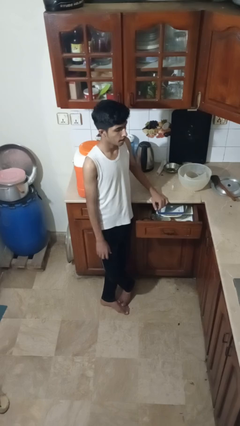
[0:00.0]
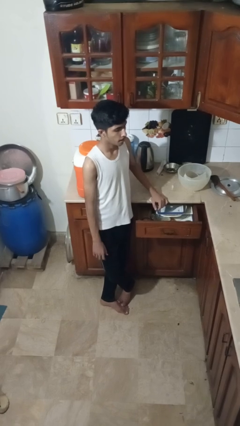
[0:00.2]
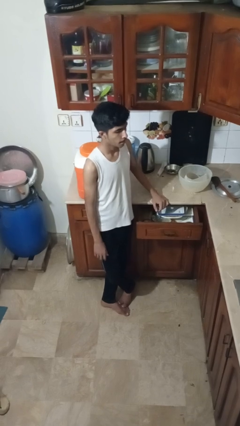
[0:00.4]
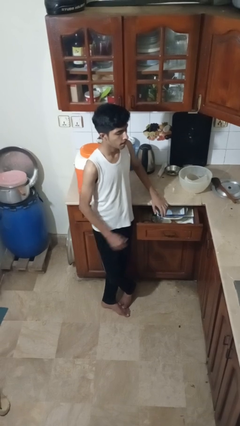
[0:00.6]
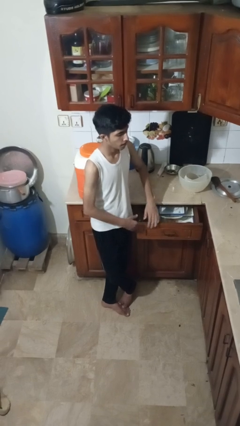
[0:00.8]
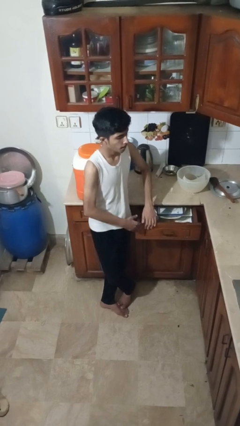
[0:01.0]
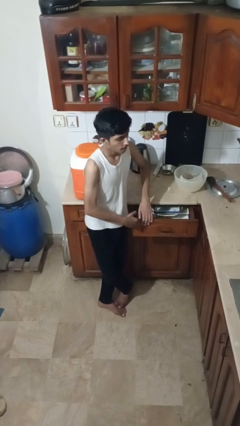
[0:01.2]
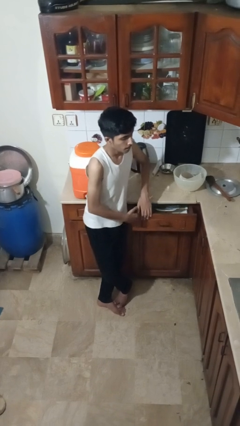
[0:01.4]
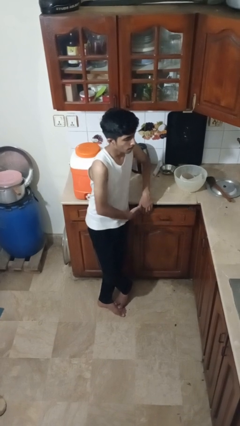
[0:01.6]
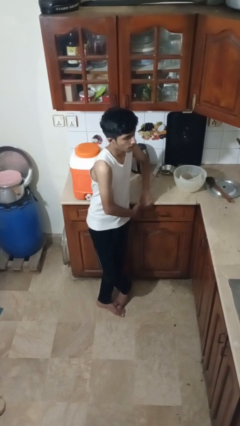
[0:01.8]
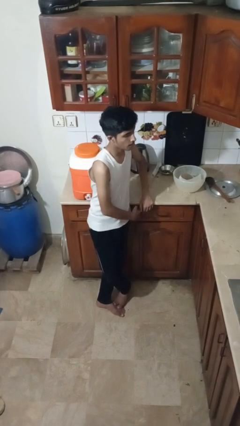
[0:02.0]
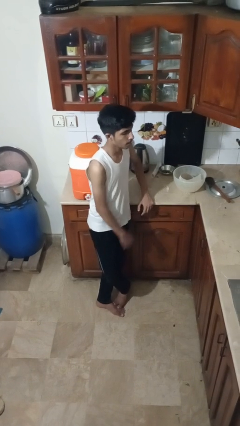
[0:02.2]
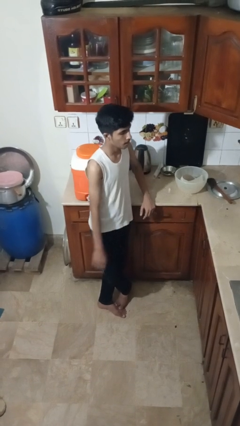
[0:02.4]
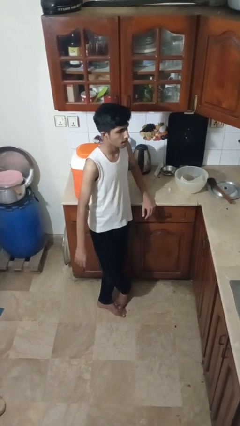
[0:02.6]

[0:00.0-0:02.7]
person closes kitchen drawer

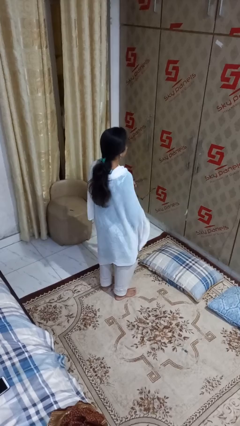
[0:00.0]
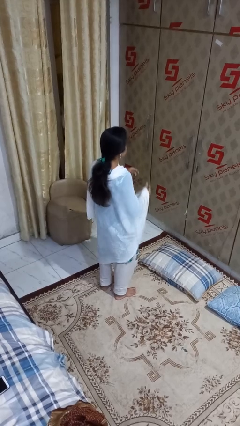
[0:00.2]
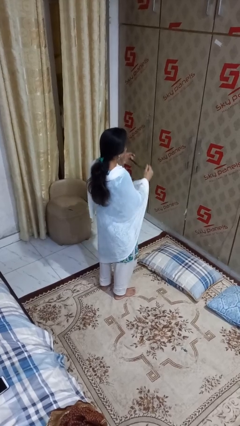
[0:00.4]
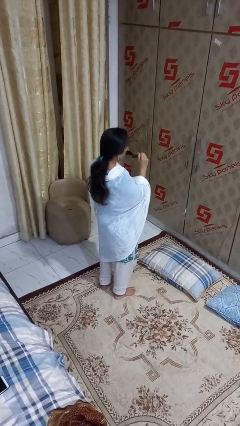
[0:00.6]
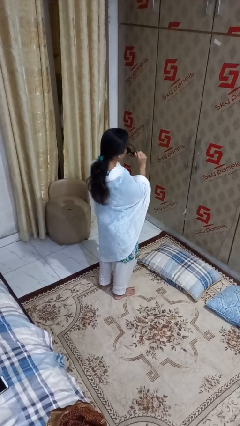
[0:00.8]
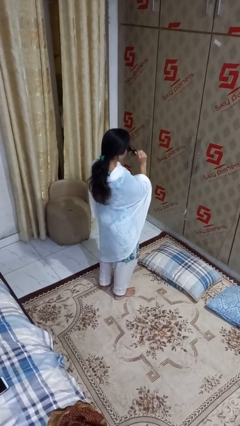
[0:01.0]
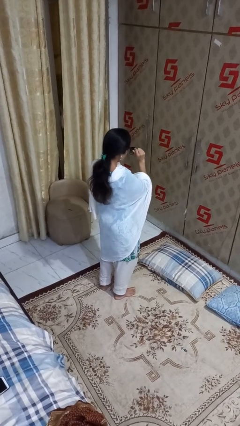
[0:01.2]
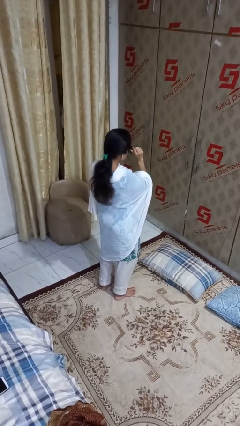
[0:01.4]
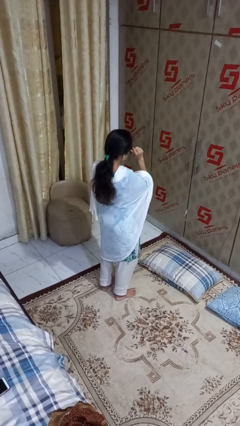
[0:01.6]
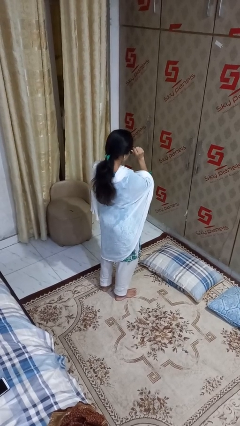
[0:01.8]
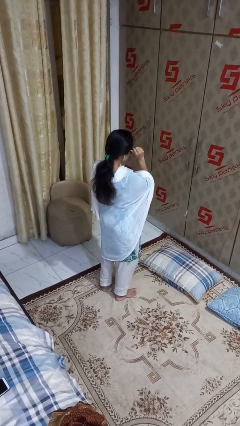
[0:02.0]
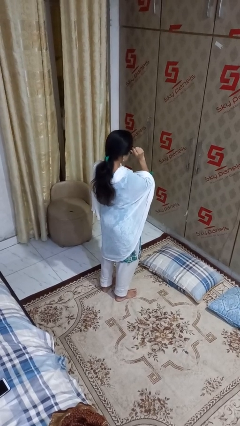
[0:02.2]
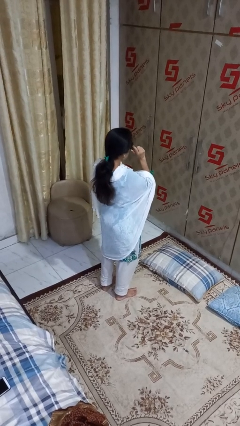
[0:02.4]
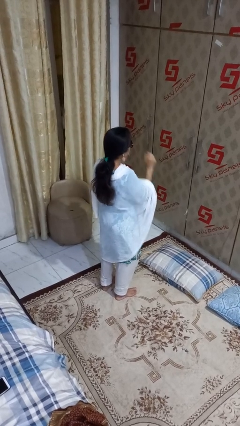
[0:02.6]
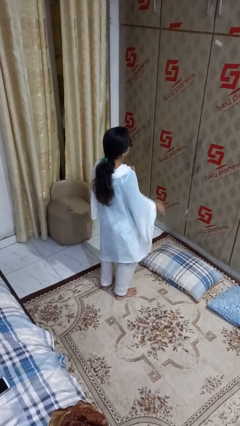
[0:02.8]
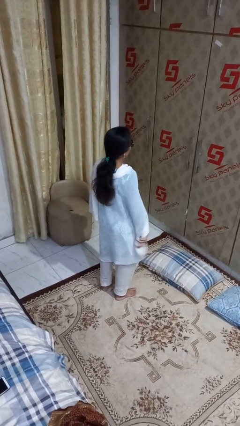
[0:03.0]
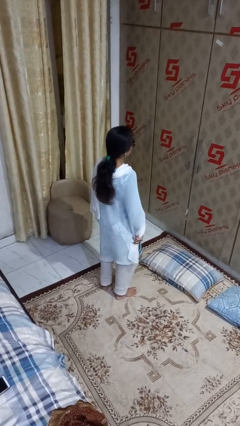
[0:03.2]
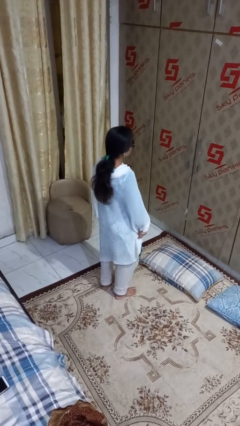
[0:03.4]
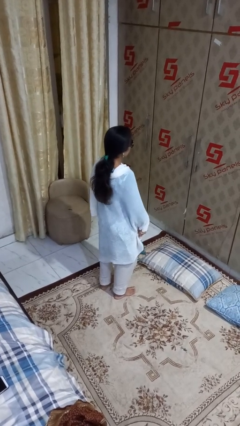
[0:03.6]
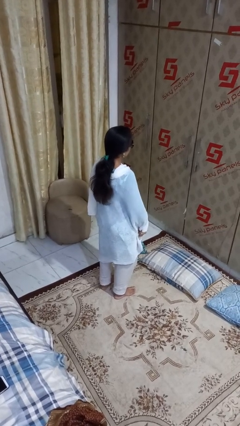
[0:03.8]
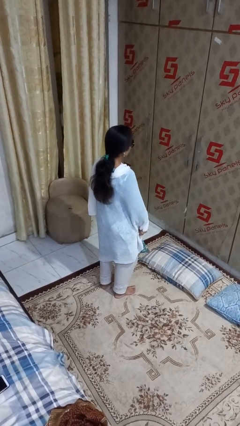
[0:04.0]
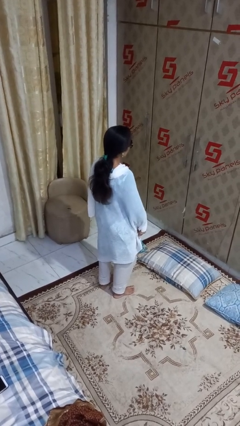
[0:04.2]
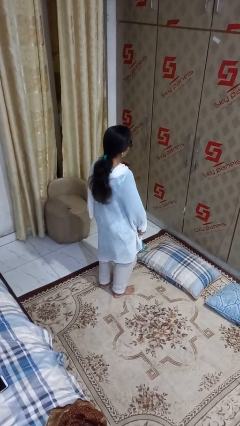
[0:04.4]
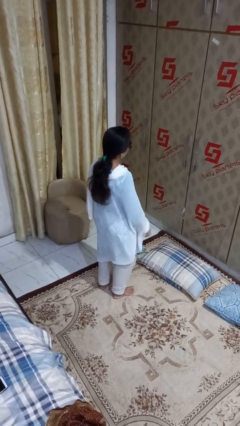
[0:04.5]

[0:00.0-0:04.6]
person puts on sunglasses

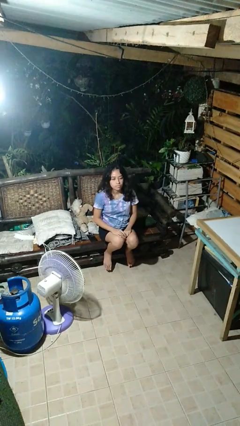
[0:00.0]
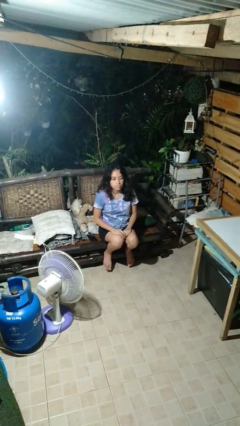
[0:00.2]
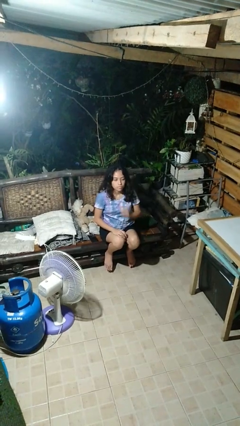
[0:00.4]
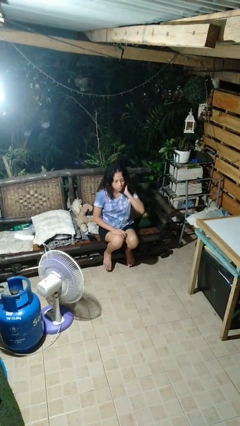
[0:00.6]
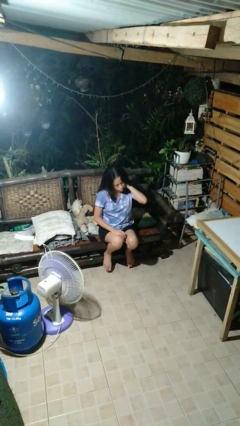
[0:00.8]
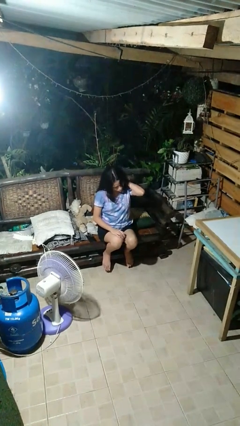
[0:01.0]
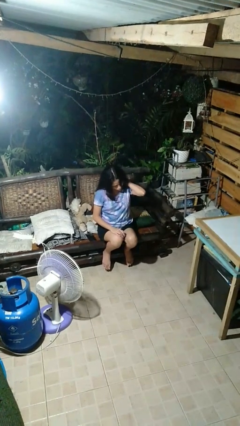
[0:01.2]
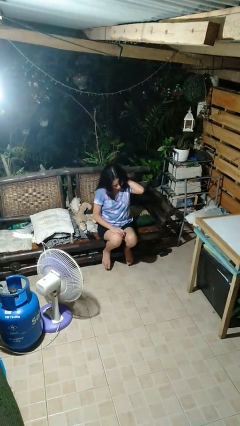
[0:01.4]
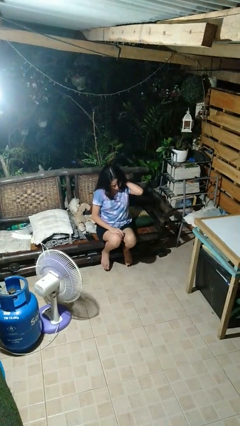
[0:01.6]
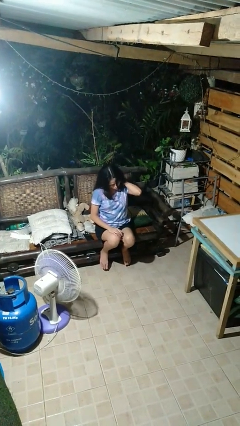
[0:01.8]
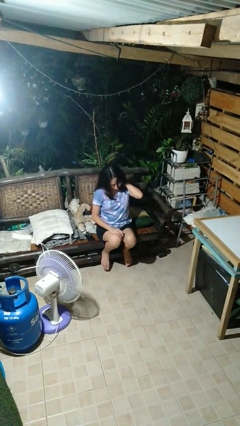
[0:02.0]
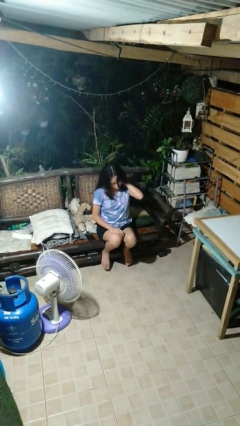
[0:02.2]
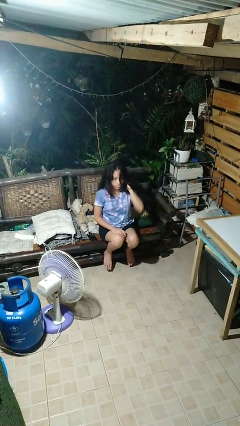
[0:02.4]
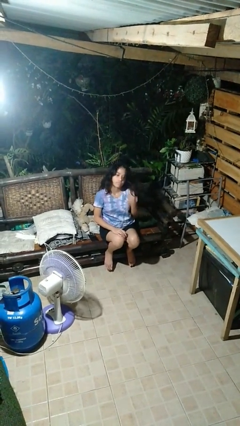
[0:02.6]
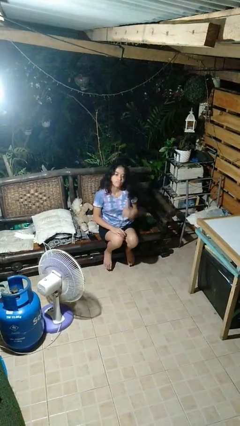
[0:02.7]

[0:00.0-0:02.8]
person rubs neck

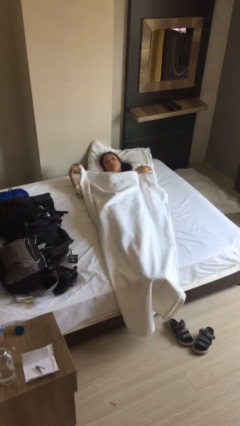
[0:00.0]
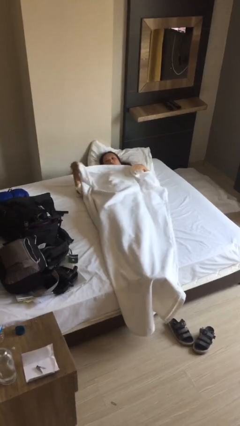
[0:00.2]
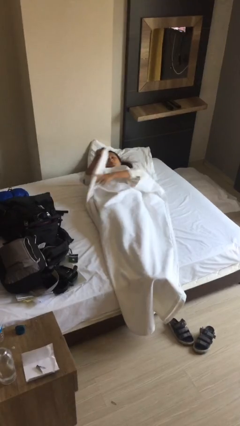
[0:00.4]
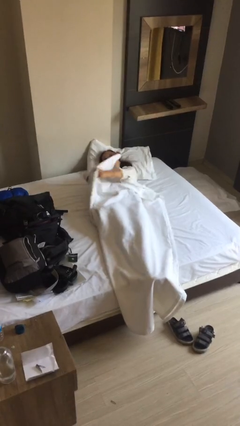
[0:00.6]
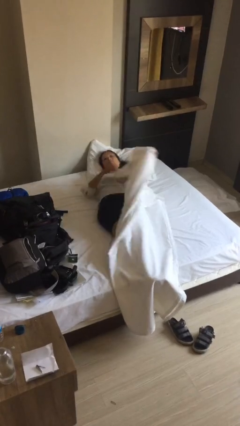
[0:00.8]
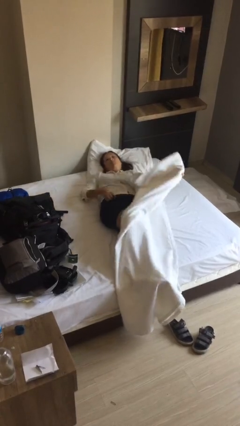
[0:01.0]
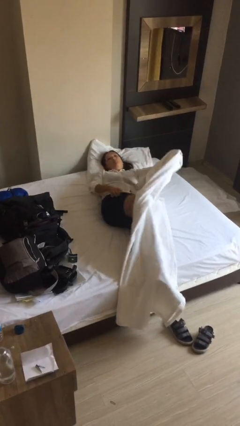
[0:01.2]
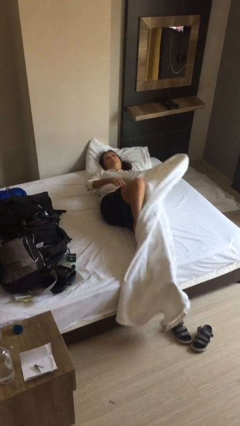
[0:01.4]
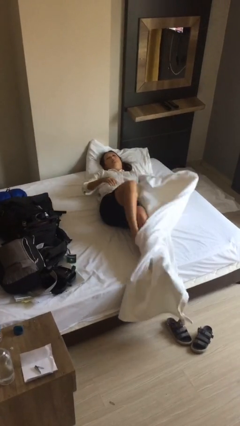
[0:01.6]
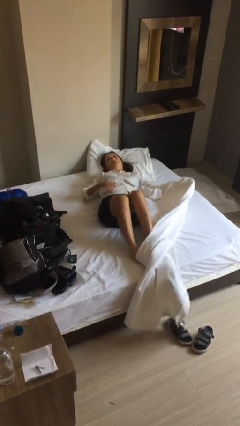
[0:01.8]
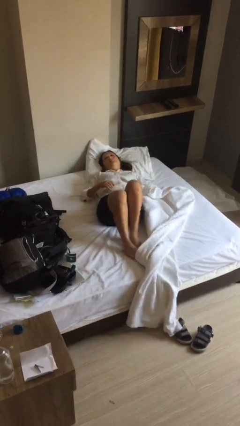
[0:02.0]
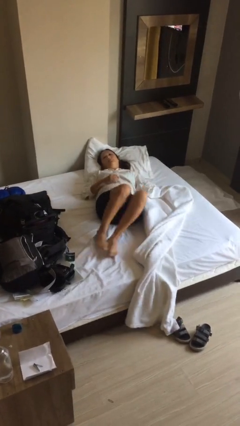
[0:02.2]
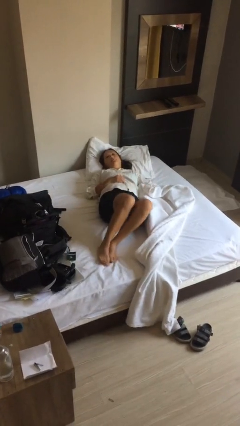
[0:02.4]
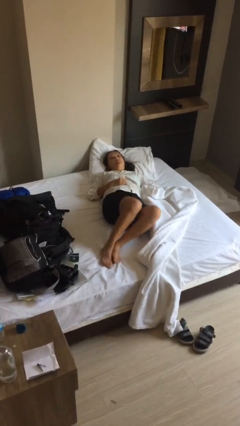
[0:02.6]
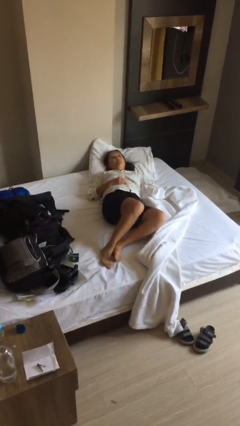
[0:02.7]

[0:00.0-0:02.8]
person uncovers with bedsheets

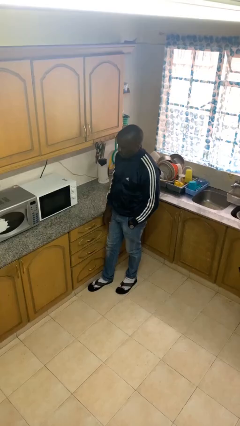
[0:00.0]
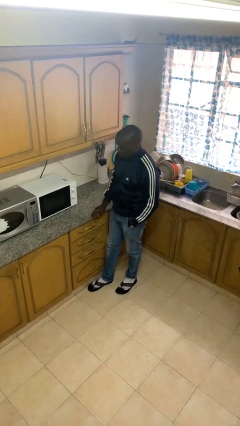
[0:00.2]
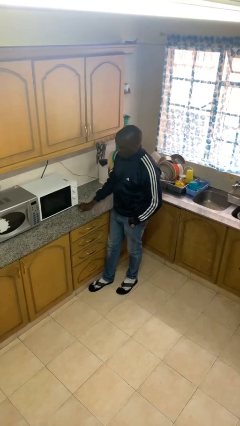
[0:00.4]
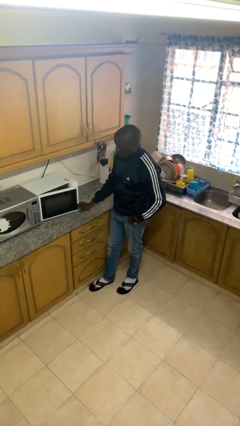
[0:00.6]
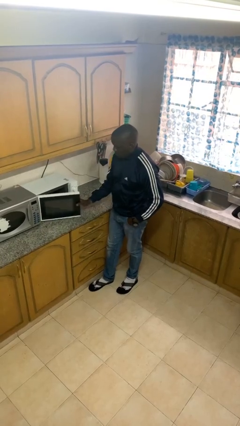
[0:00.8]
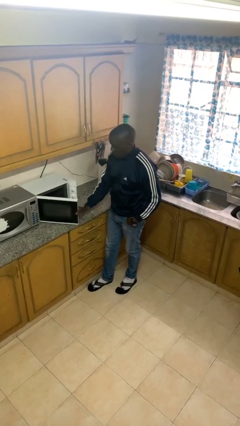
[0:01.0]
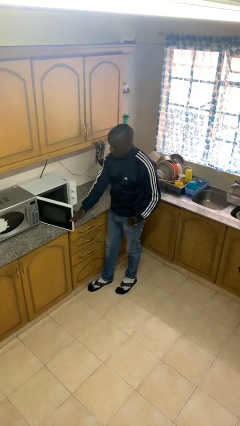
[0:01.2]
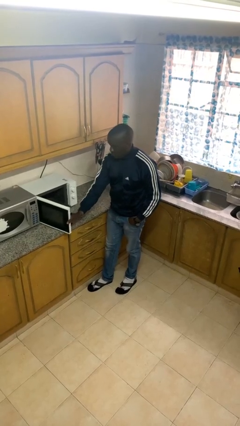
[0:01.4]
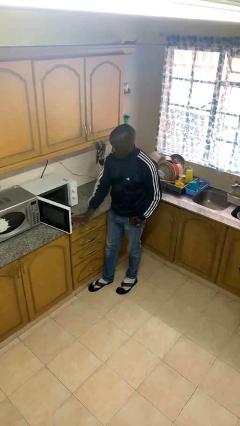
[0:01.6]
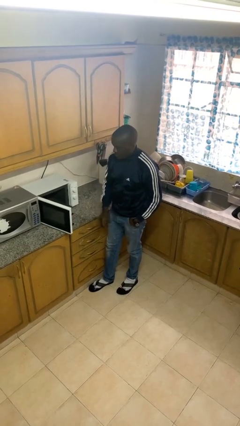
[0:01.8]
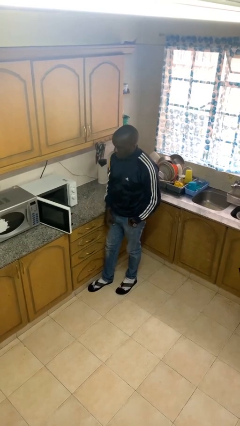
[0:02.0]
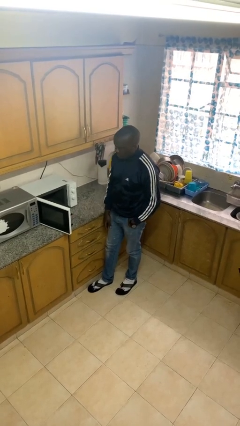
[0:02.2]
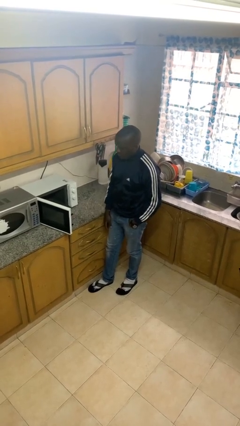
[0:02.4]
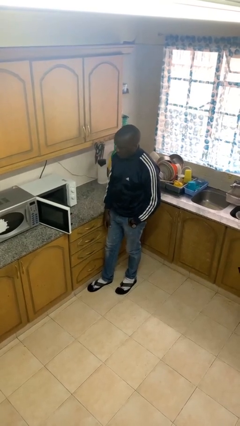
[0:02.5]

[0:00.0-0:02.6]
person opens microwave

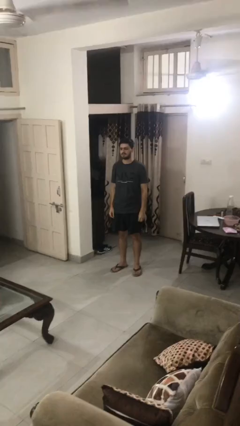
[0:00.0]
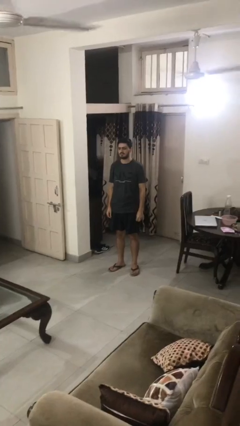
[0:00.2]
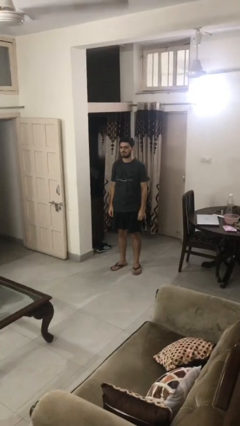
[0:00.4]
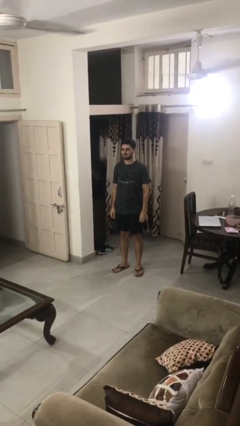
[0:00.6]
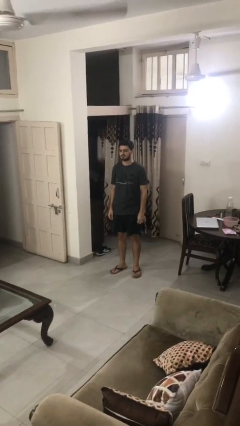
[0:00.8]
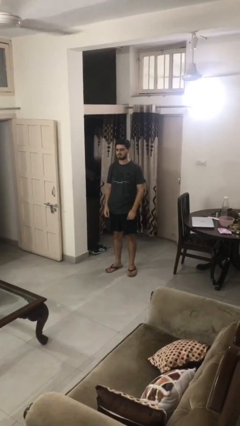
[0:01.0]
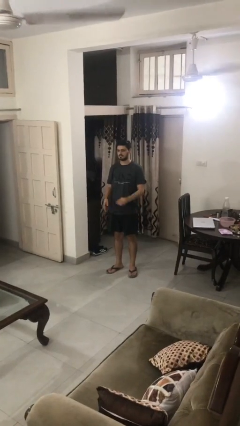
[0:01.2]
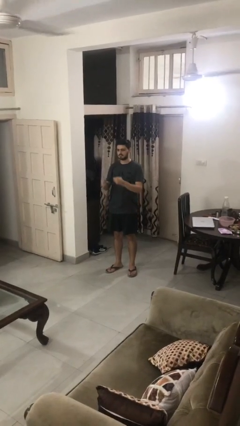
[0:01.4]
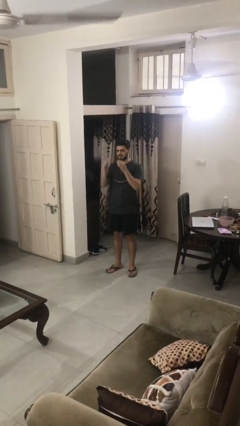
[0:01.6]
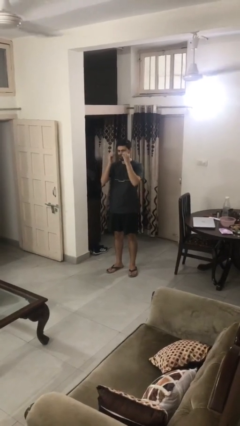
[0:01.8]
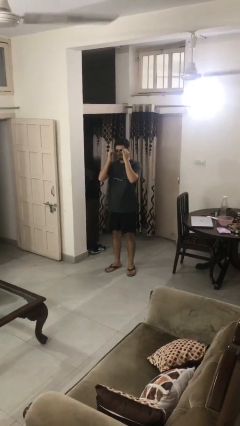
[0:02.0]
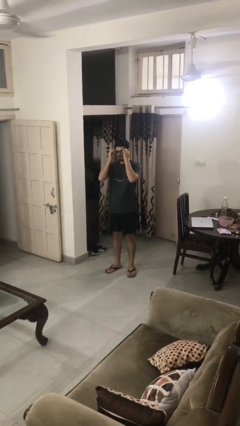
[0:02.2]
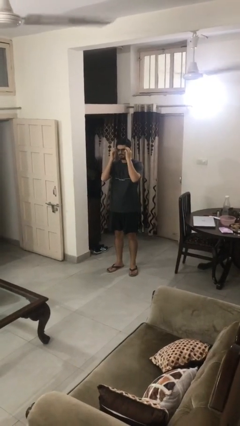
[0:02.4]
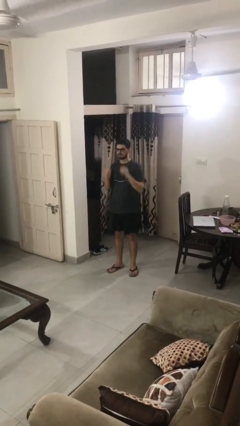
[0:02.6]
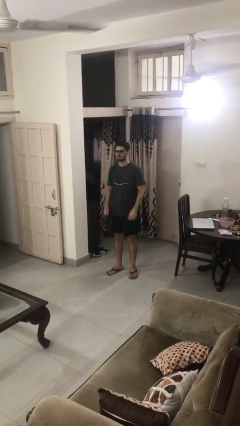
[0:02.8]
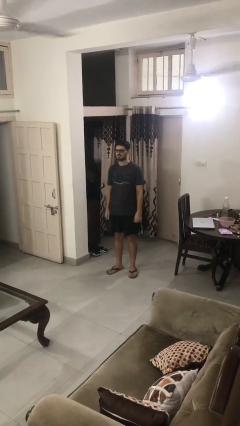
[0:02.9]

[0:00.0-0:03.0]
person puts on glasses
